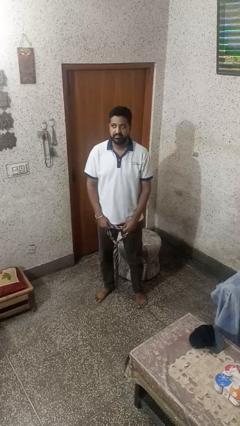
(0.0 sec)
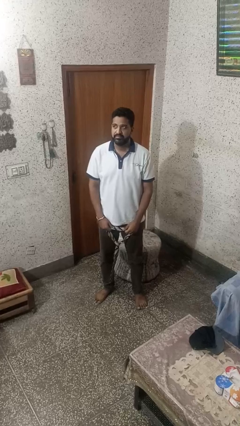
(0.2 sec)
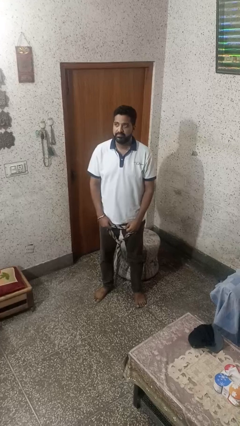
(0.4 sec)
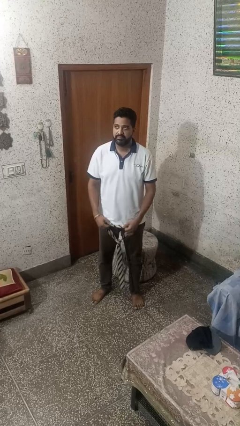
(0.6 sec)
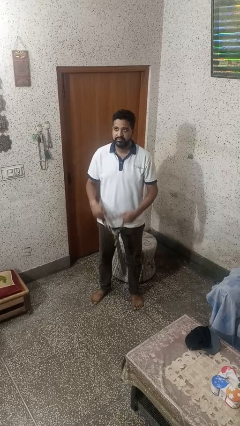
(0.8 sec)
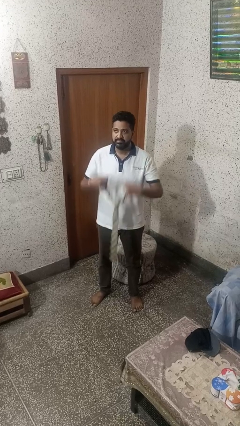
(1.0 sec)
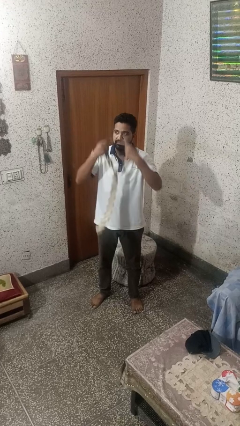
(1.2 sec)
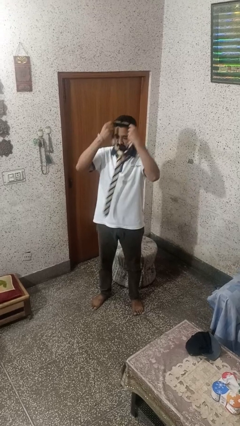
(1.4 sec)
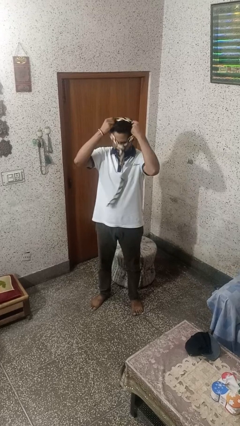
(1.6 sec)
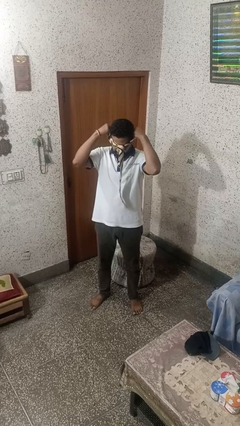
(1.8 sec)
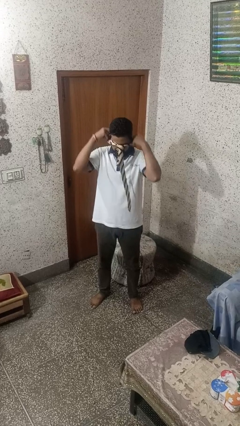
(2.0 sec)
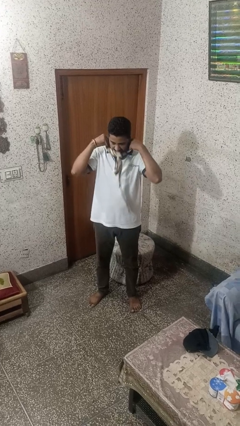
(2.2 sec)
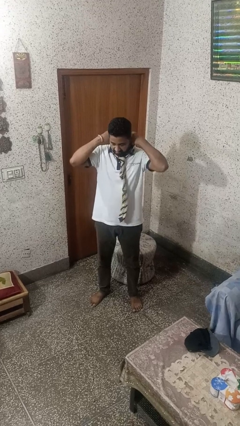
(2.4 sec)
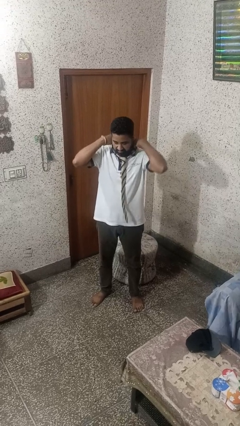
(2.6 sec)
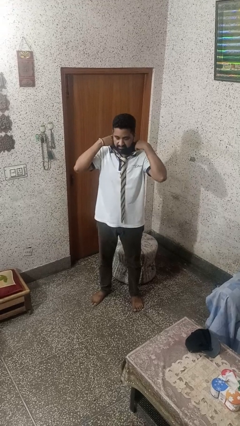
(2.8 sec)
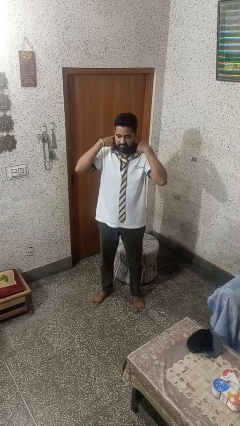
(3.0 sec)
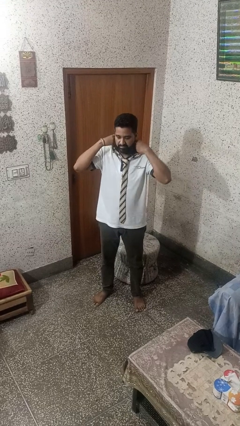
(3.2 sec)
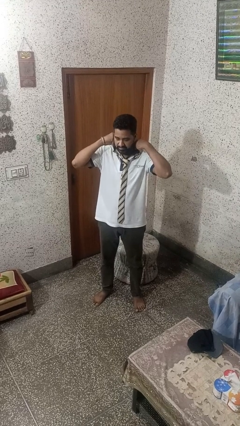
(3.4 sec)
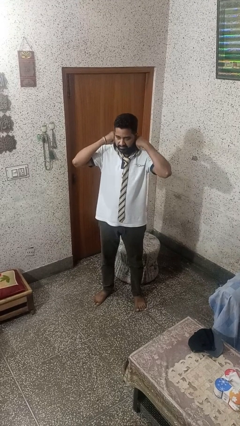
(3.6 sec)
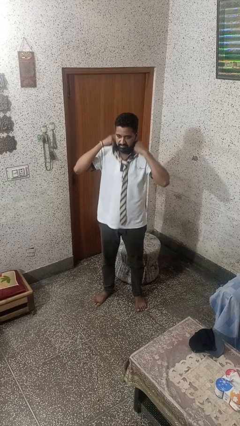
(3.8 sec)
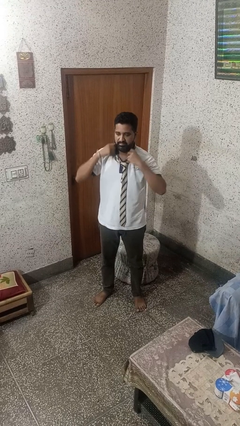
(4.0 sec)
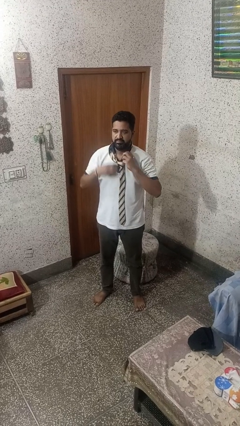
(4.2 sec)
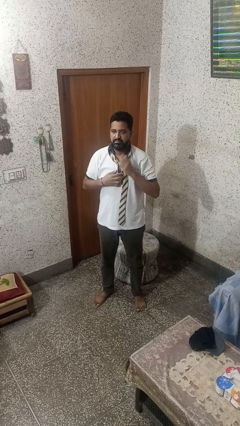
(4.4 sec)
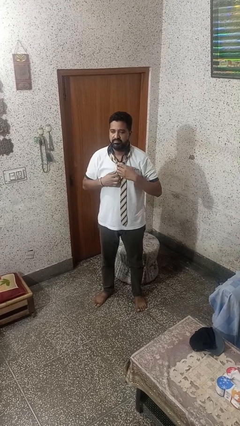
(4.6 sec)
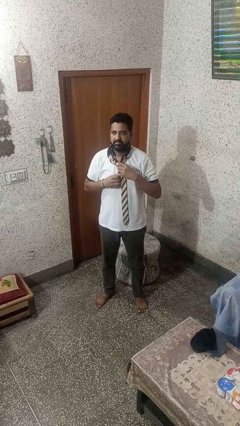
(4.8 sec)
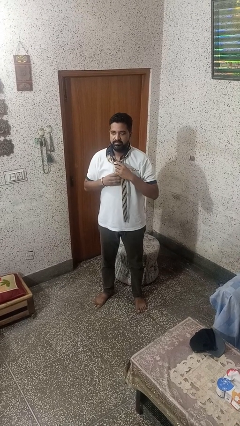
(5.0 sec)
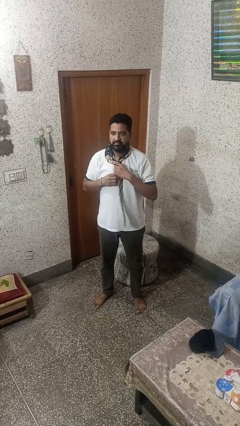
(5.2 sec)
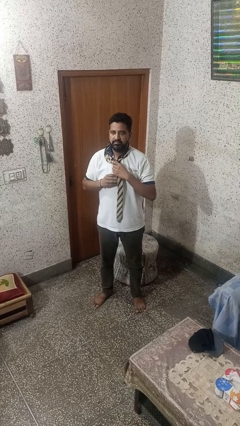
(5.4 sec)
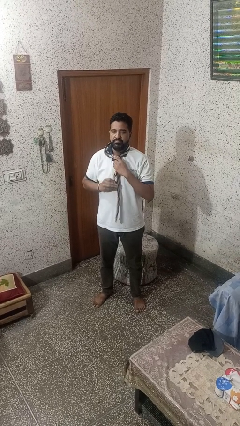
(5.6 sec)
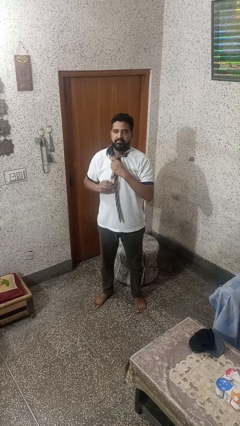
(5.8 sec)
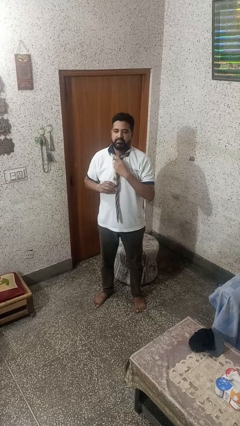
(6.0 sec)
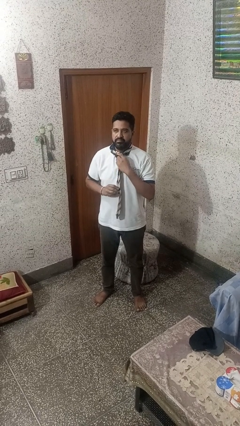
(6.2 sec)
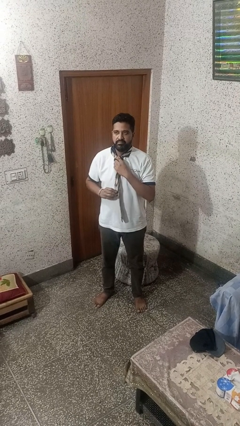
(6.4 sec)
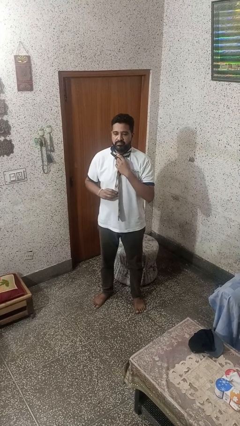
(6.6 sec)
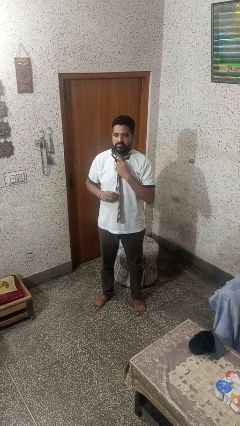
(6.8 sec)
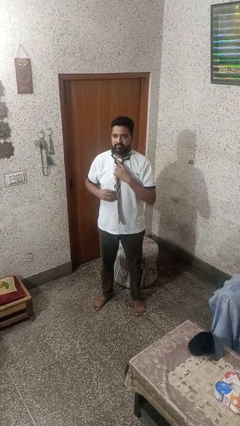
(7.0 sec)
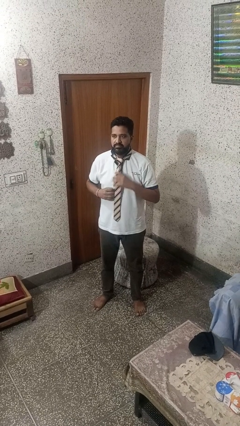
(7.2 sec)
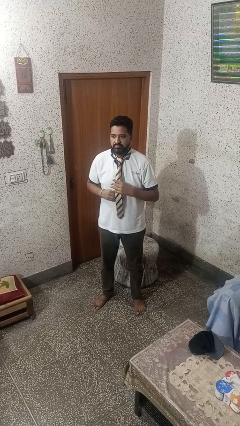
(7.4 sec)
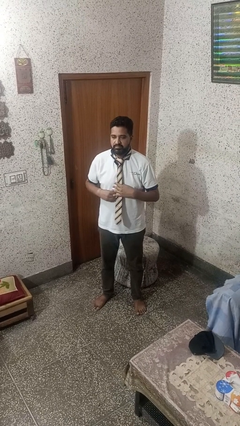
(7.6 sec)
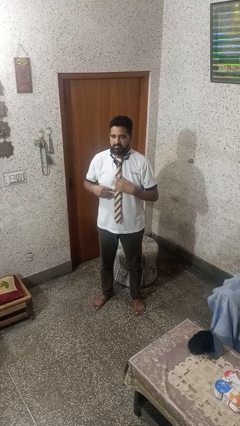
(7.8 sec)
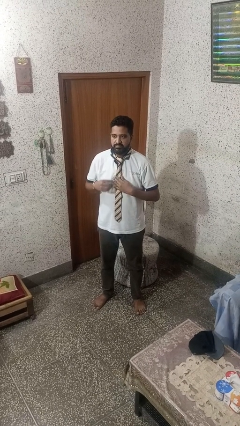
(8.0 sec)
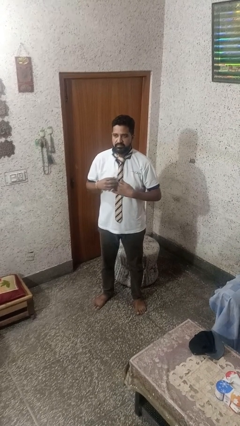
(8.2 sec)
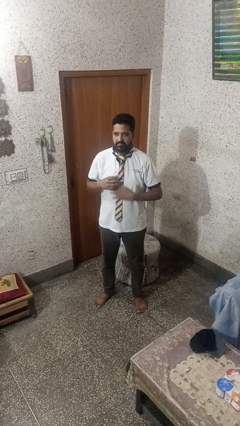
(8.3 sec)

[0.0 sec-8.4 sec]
person puts on necktie

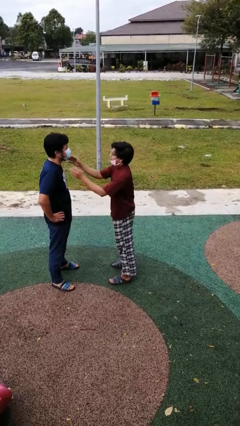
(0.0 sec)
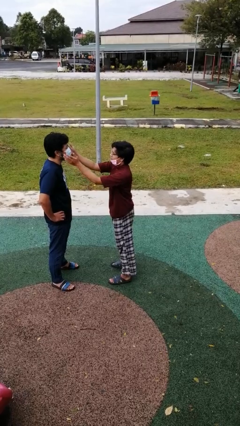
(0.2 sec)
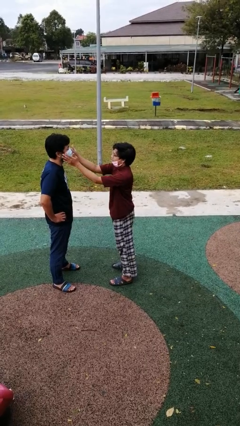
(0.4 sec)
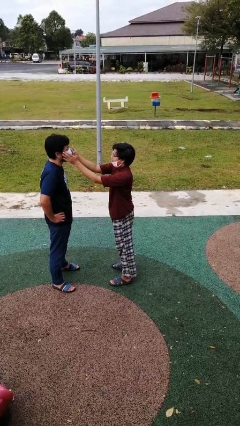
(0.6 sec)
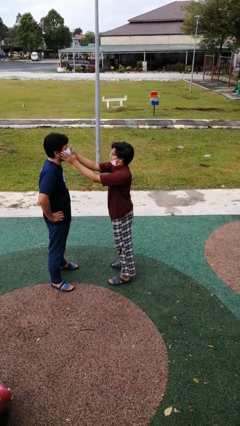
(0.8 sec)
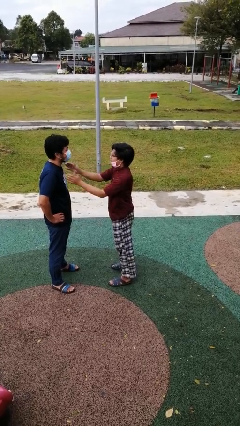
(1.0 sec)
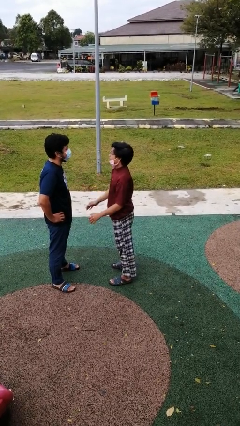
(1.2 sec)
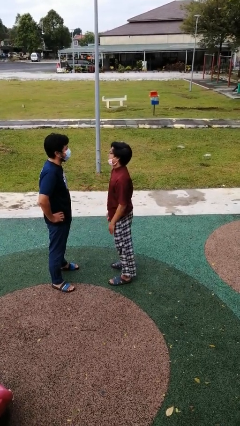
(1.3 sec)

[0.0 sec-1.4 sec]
person touches face of person

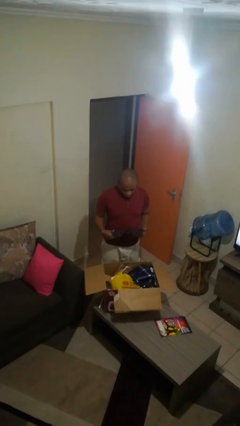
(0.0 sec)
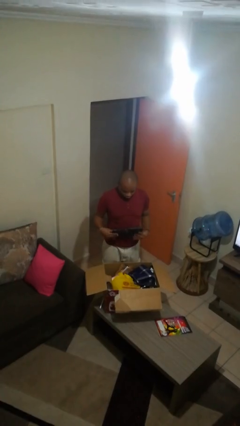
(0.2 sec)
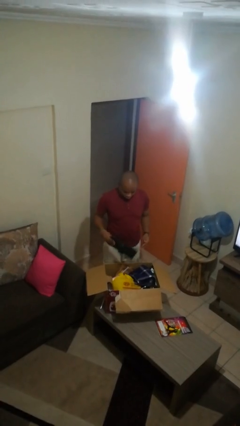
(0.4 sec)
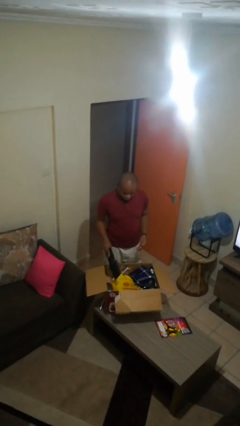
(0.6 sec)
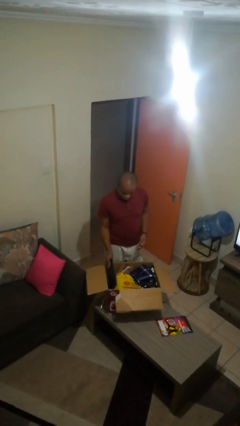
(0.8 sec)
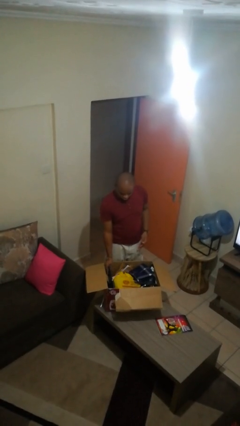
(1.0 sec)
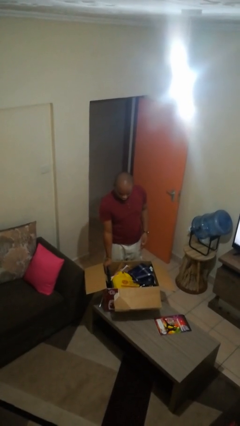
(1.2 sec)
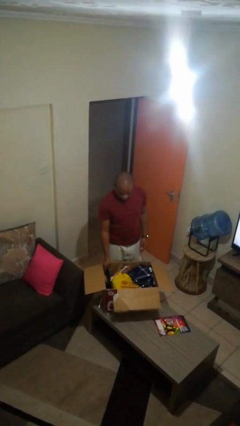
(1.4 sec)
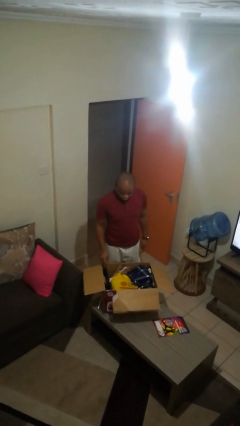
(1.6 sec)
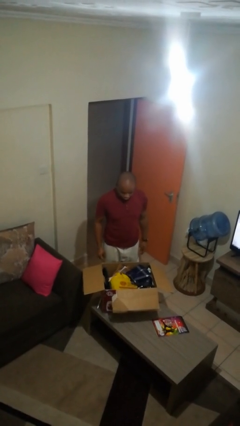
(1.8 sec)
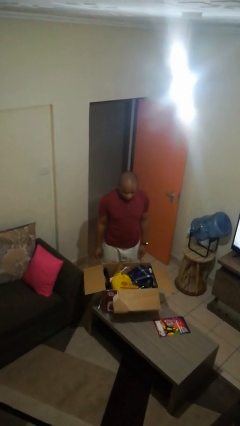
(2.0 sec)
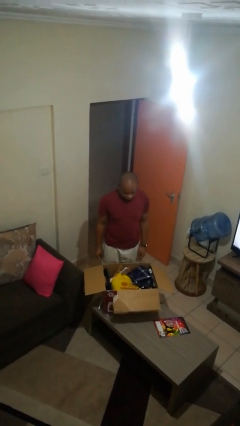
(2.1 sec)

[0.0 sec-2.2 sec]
person puts object into box

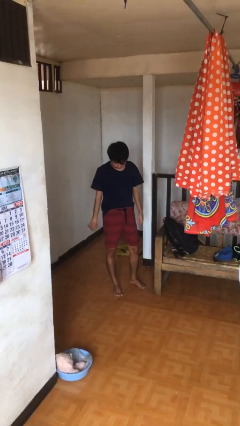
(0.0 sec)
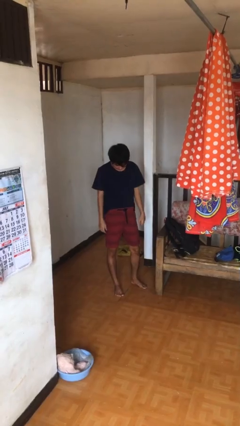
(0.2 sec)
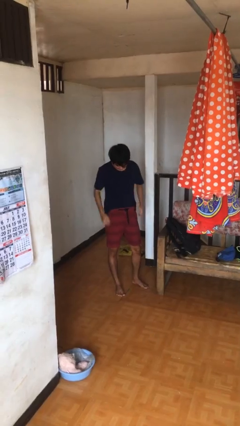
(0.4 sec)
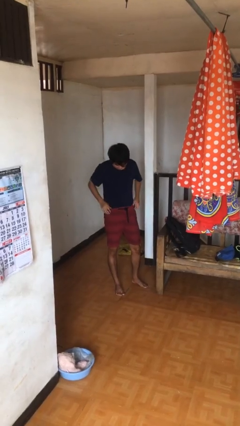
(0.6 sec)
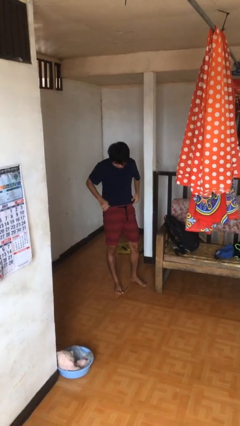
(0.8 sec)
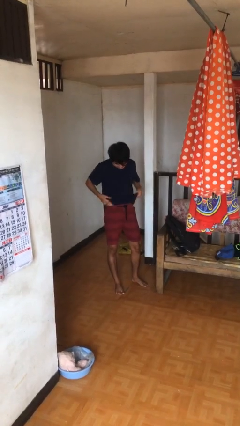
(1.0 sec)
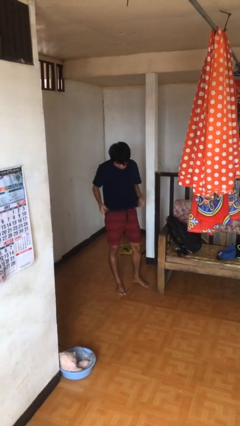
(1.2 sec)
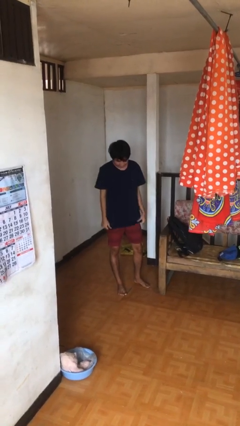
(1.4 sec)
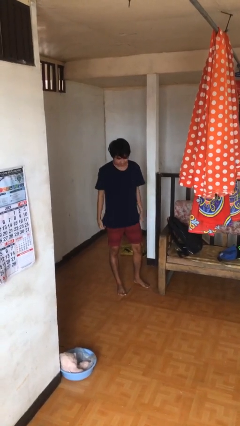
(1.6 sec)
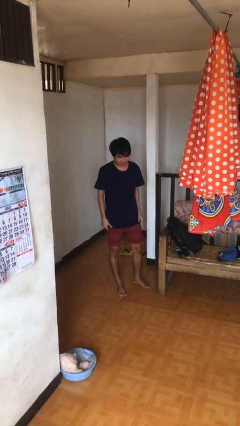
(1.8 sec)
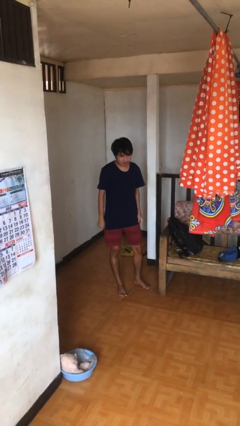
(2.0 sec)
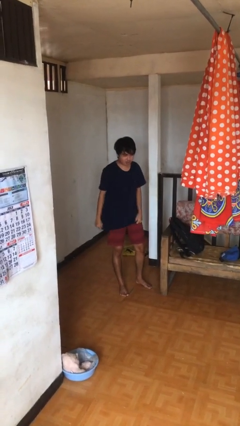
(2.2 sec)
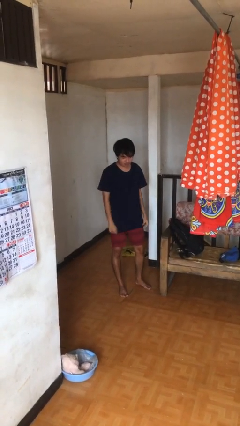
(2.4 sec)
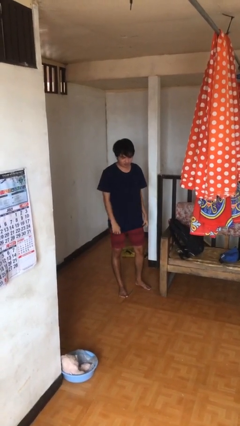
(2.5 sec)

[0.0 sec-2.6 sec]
person untucks shirt

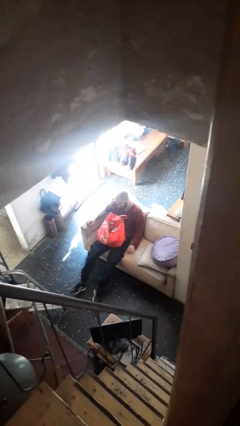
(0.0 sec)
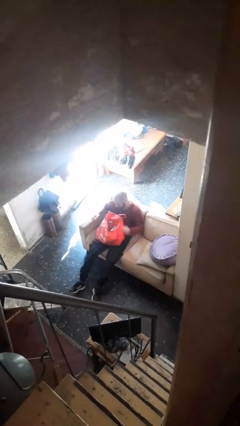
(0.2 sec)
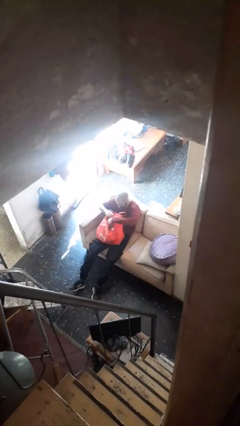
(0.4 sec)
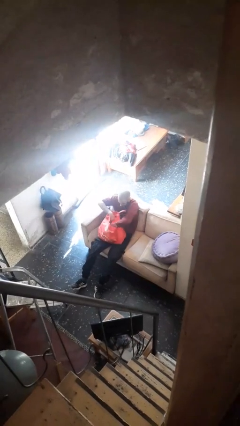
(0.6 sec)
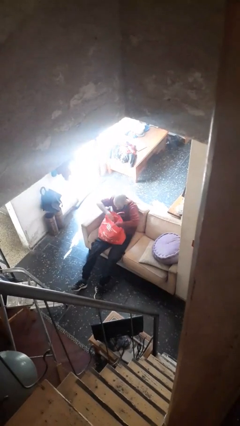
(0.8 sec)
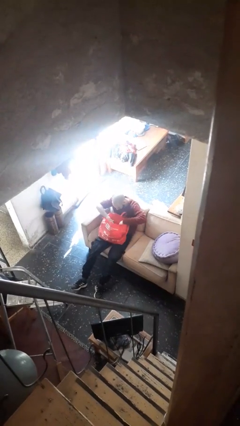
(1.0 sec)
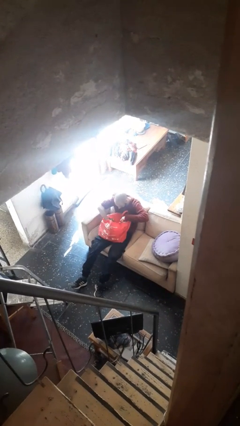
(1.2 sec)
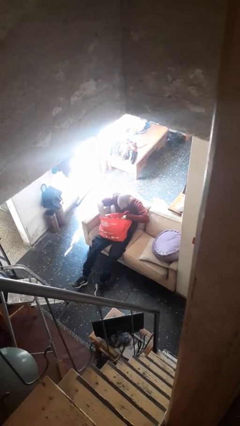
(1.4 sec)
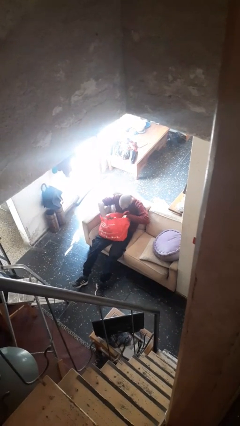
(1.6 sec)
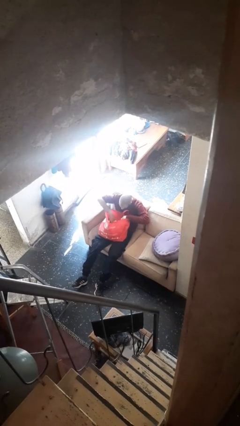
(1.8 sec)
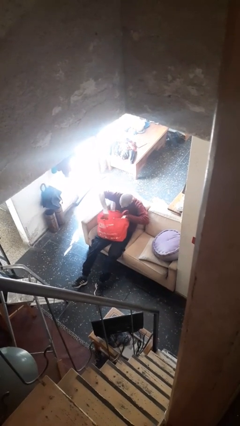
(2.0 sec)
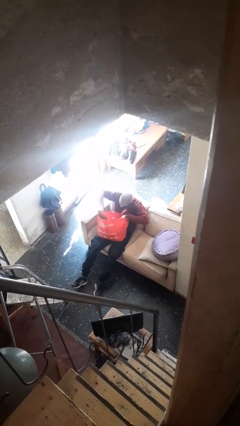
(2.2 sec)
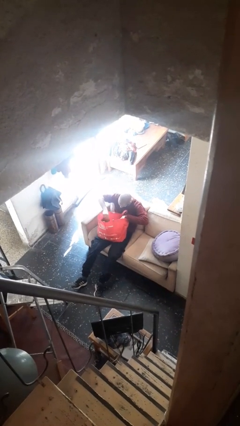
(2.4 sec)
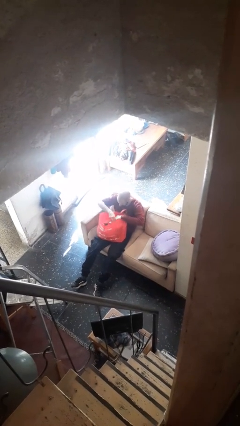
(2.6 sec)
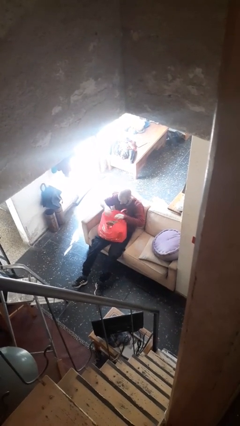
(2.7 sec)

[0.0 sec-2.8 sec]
person searches in bag
